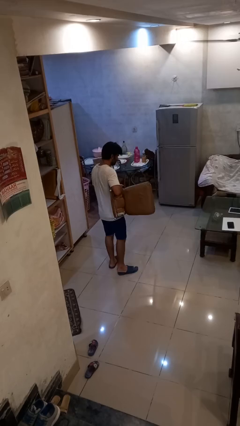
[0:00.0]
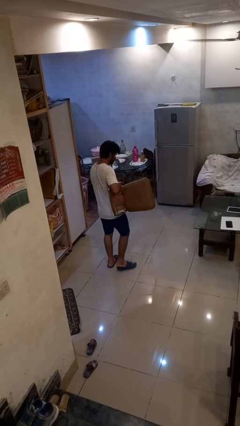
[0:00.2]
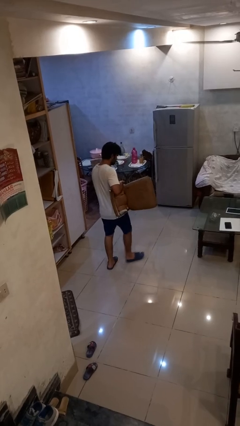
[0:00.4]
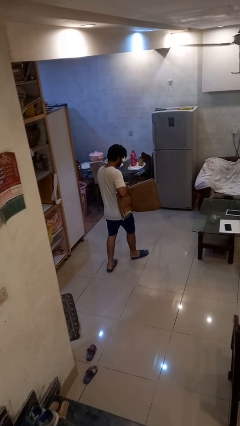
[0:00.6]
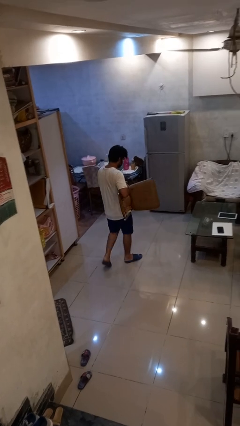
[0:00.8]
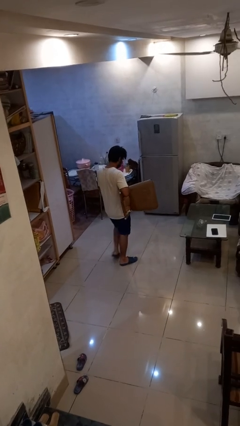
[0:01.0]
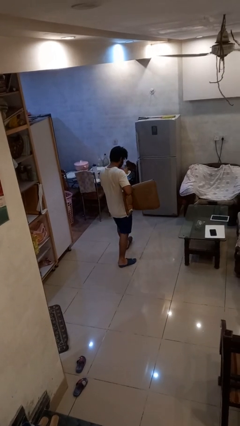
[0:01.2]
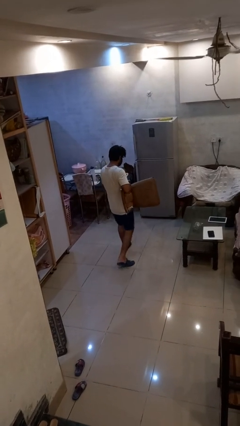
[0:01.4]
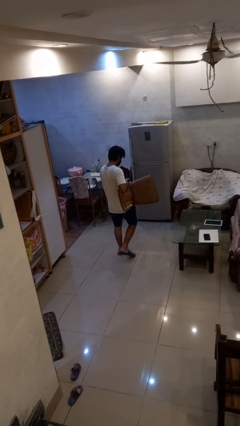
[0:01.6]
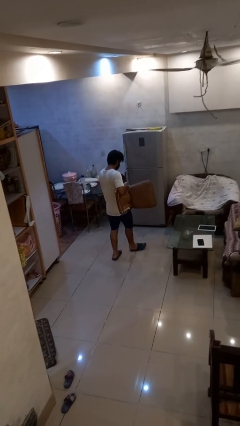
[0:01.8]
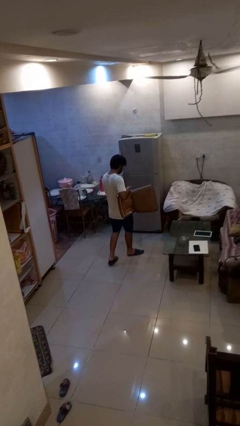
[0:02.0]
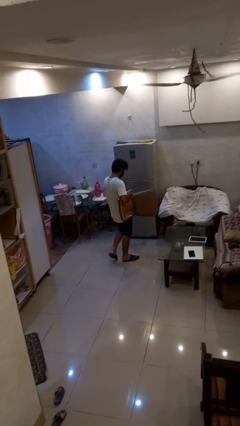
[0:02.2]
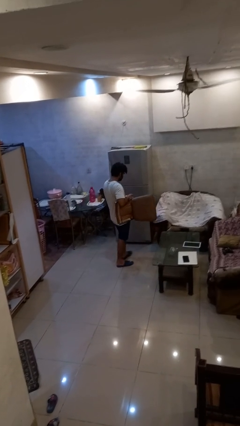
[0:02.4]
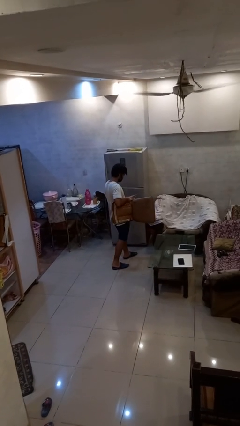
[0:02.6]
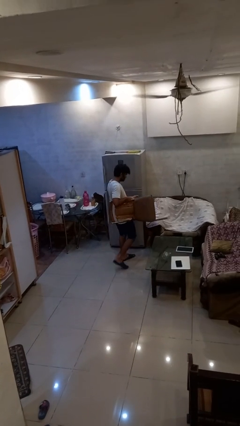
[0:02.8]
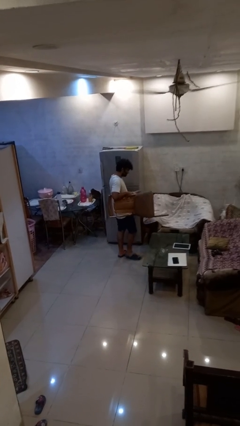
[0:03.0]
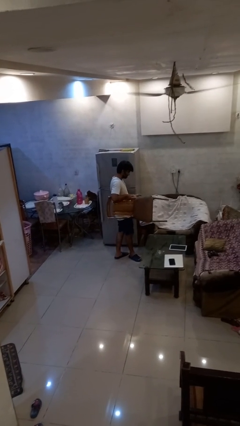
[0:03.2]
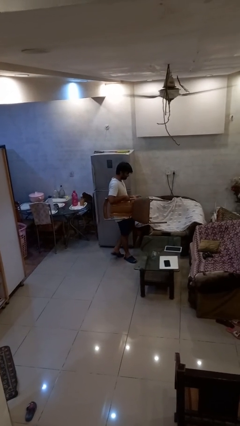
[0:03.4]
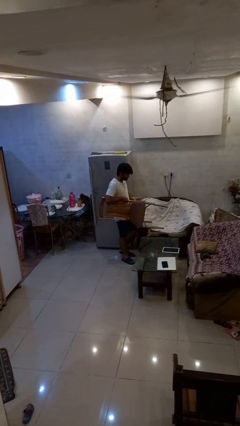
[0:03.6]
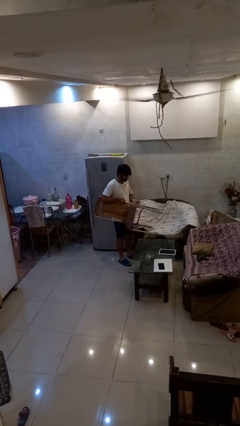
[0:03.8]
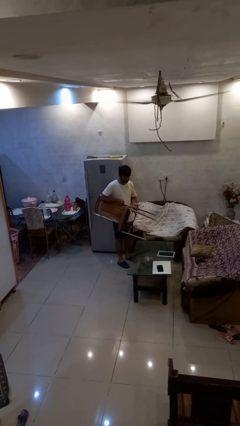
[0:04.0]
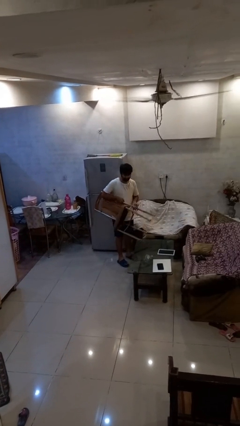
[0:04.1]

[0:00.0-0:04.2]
person carries furniture

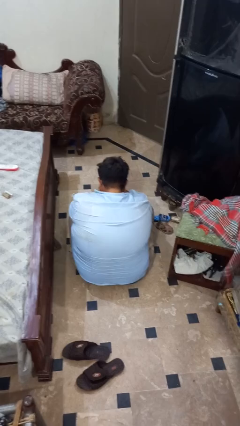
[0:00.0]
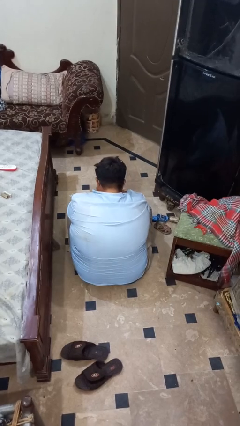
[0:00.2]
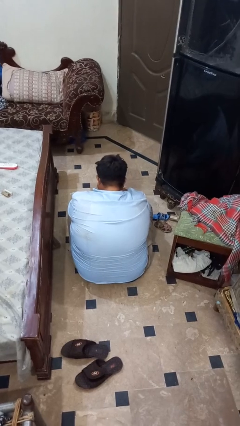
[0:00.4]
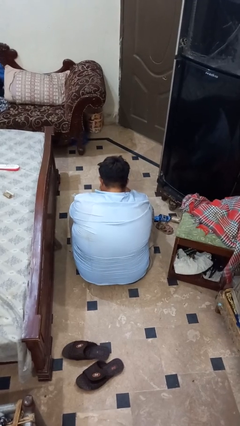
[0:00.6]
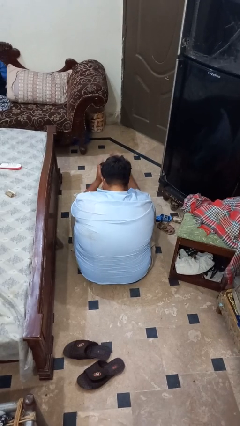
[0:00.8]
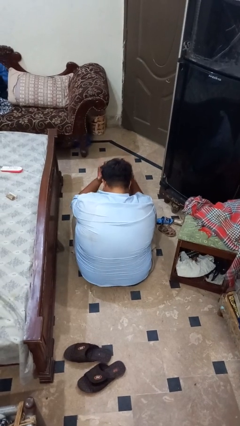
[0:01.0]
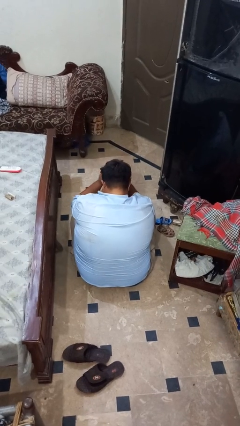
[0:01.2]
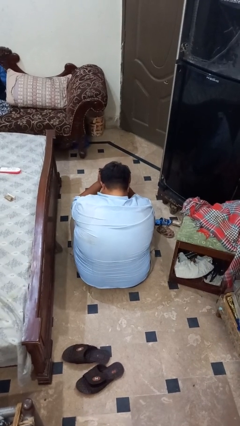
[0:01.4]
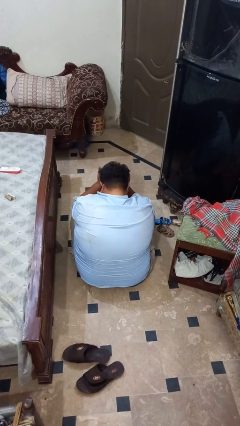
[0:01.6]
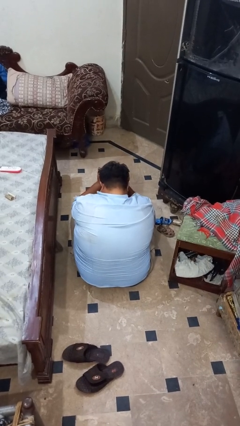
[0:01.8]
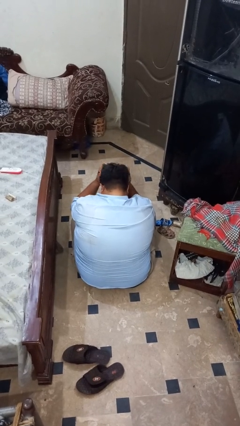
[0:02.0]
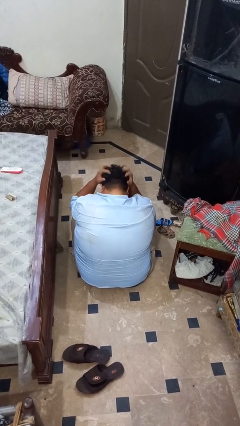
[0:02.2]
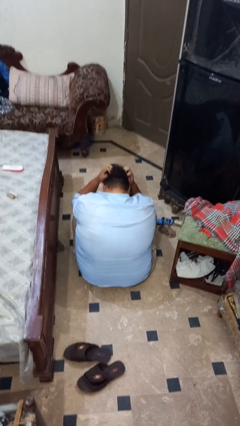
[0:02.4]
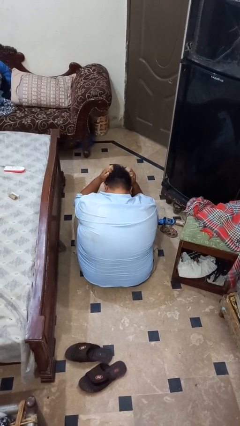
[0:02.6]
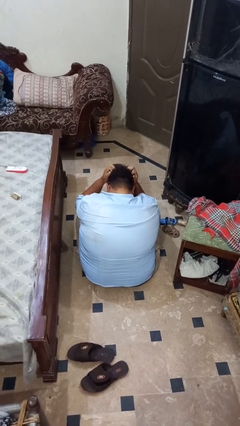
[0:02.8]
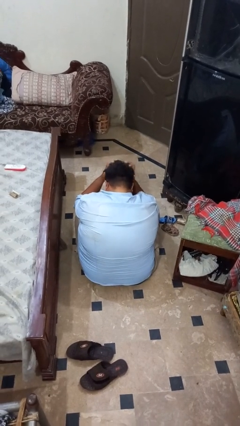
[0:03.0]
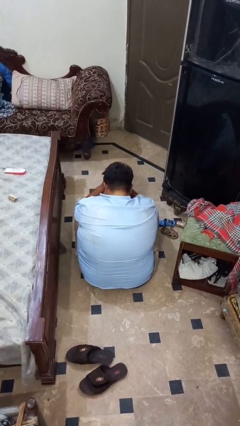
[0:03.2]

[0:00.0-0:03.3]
person strokes hair

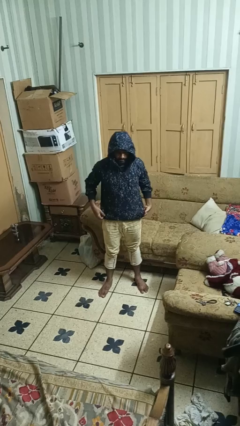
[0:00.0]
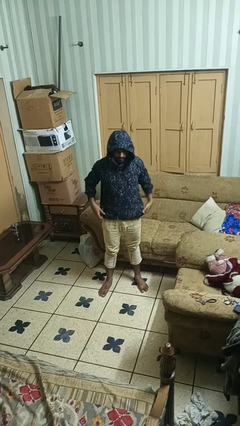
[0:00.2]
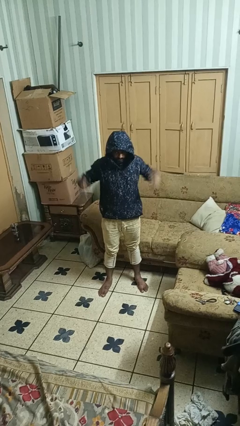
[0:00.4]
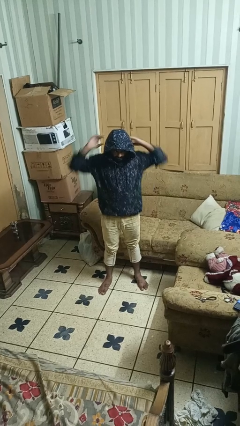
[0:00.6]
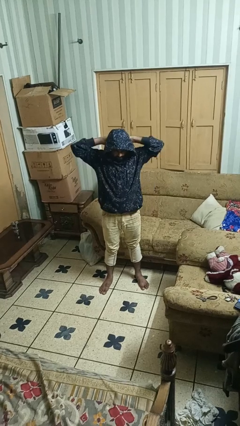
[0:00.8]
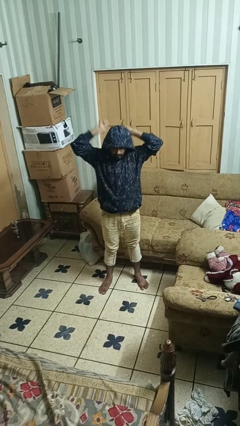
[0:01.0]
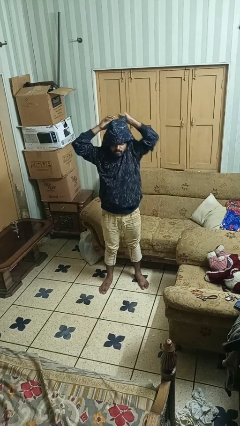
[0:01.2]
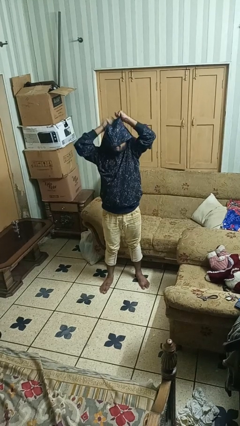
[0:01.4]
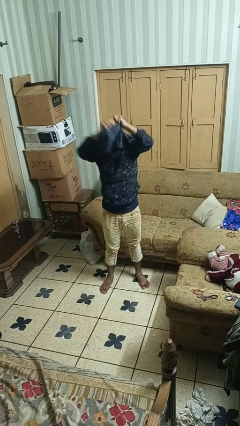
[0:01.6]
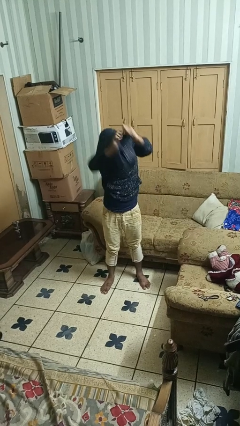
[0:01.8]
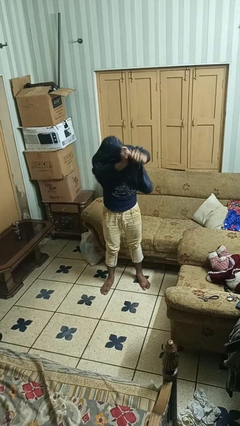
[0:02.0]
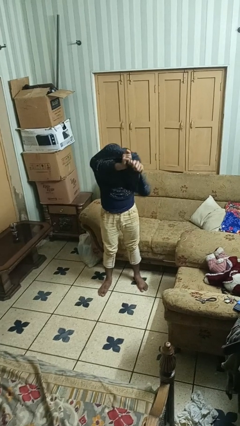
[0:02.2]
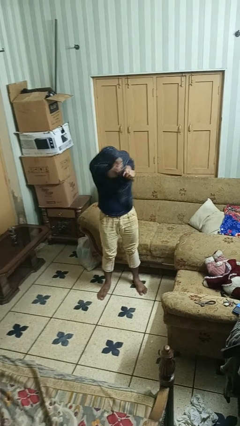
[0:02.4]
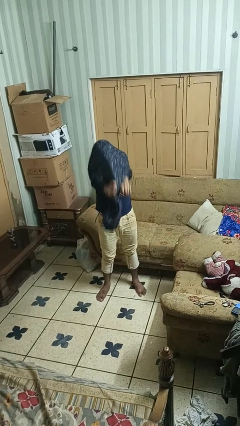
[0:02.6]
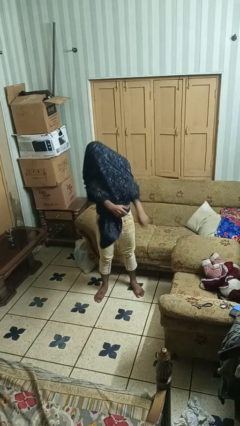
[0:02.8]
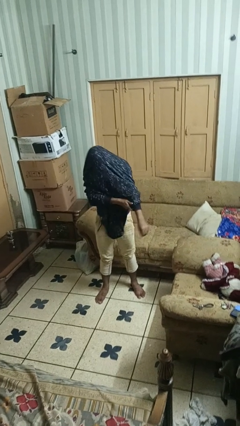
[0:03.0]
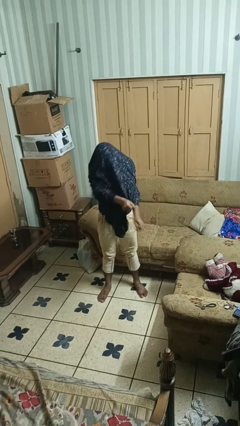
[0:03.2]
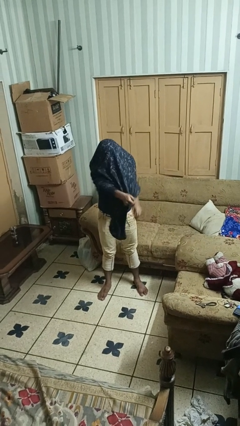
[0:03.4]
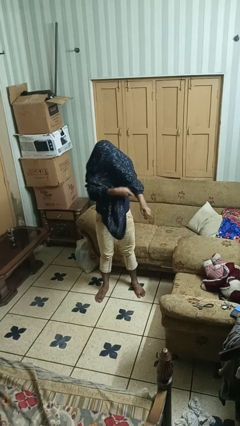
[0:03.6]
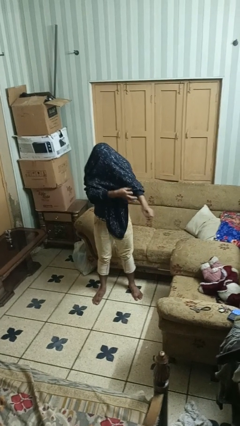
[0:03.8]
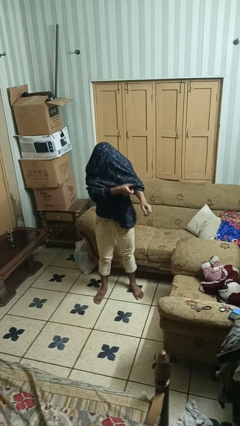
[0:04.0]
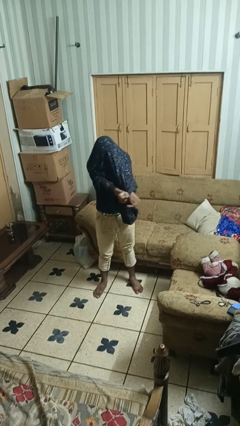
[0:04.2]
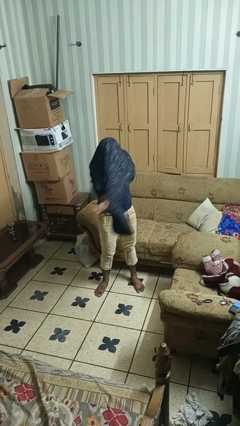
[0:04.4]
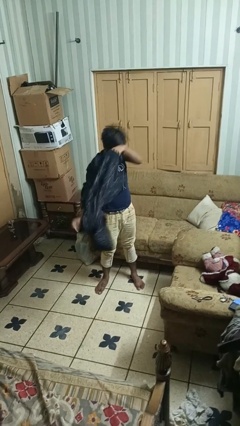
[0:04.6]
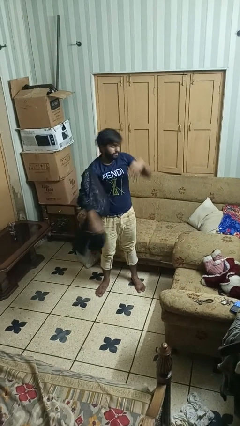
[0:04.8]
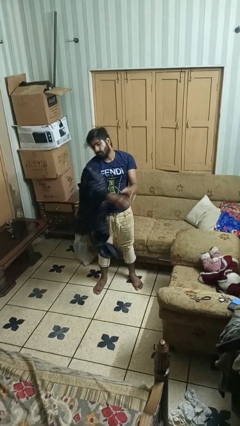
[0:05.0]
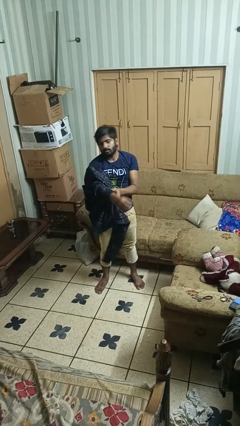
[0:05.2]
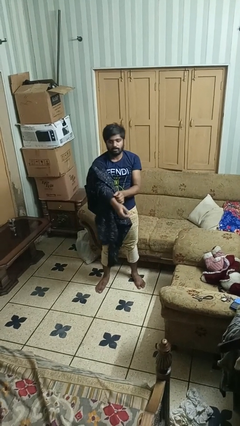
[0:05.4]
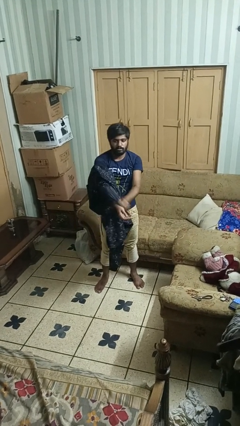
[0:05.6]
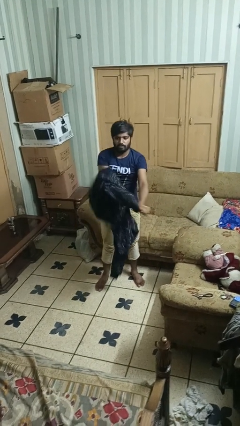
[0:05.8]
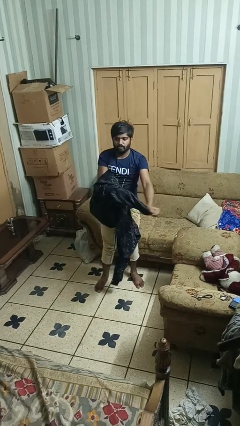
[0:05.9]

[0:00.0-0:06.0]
person takes off hoodie

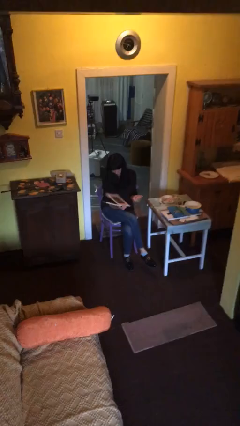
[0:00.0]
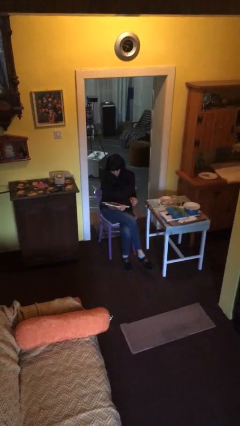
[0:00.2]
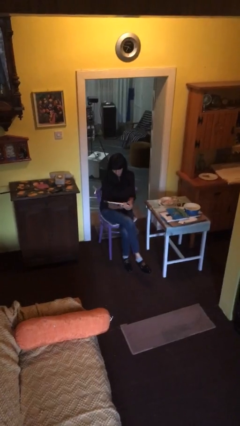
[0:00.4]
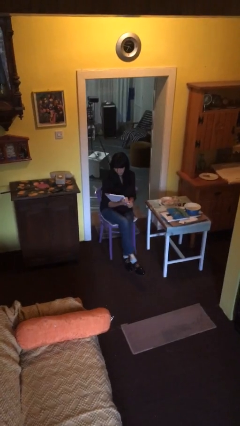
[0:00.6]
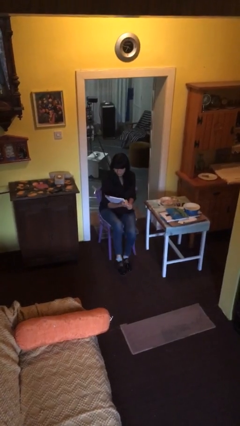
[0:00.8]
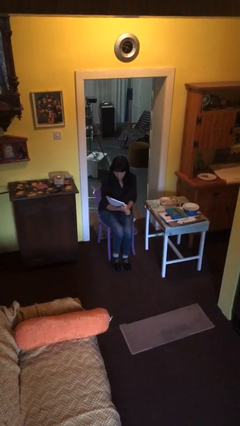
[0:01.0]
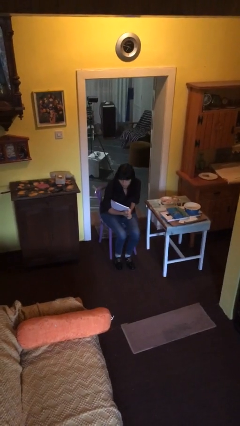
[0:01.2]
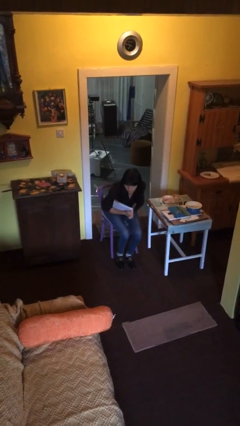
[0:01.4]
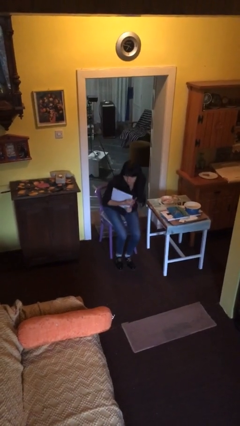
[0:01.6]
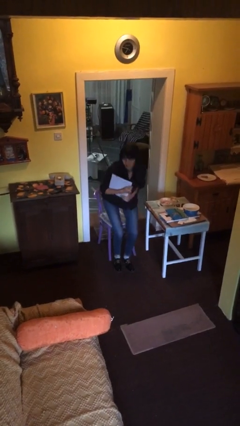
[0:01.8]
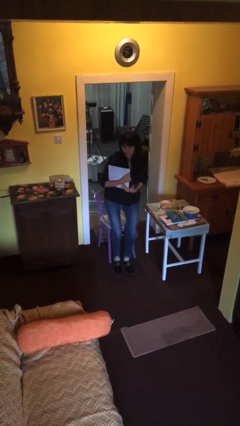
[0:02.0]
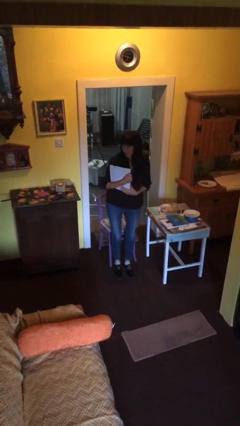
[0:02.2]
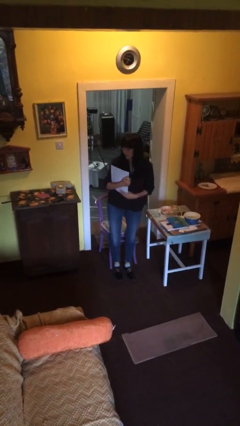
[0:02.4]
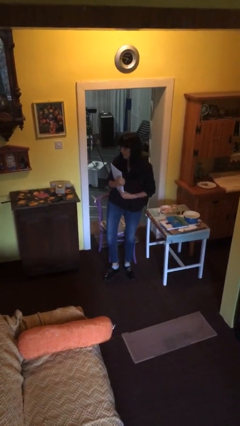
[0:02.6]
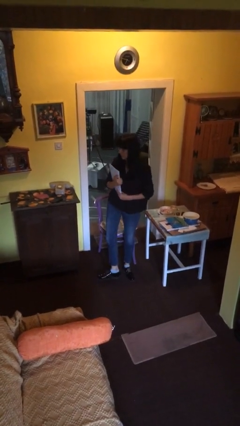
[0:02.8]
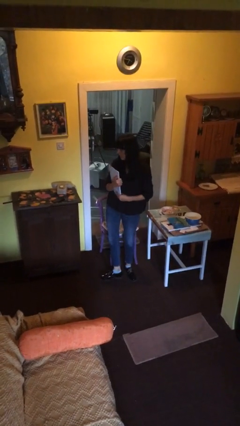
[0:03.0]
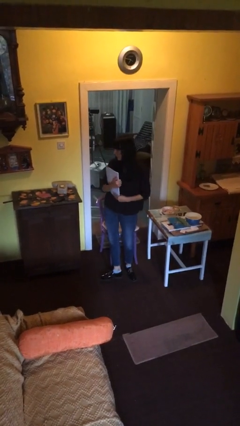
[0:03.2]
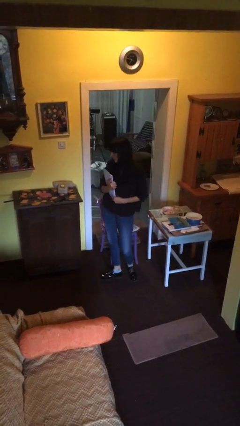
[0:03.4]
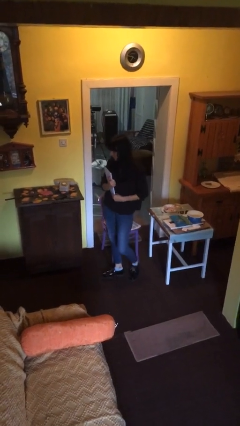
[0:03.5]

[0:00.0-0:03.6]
person stands up

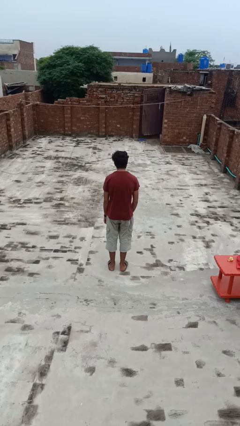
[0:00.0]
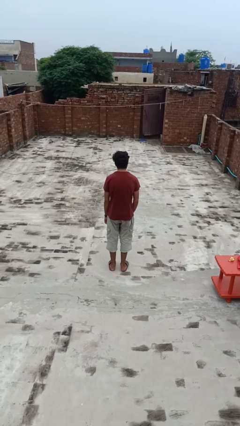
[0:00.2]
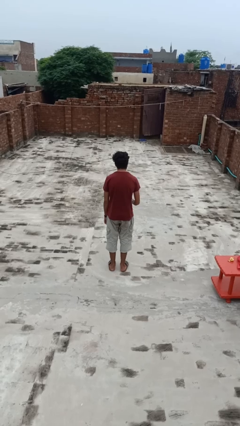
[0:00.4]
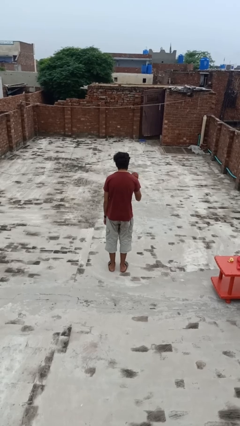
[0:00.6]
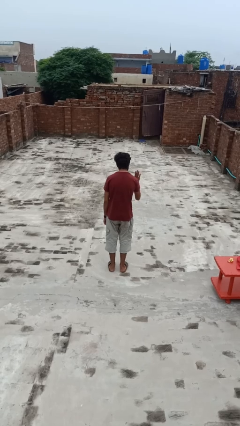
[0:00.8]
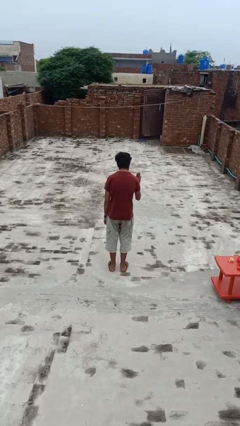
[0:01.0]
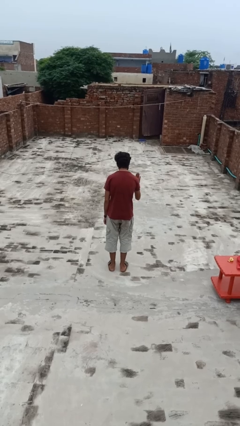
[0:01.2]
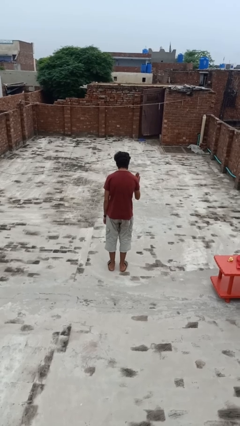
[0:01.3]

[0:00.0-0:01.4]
person gestures stop
